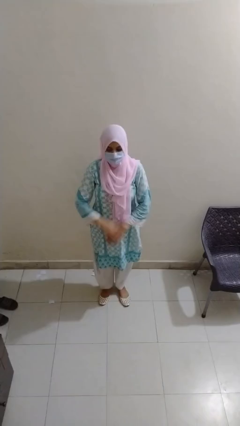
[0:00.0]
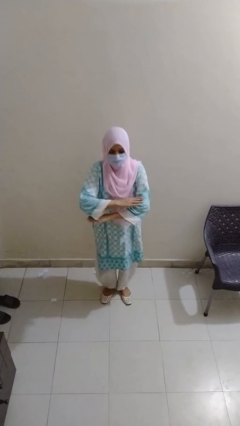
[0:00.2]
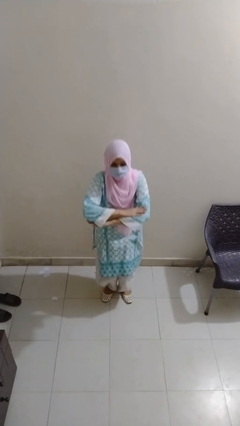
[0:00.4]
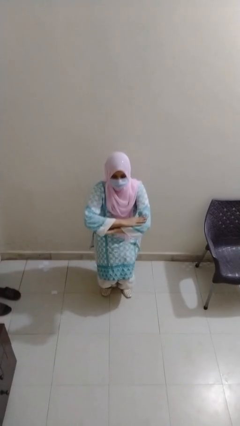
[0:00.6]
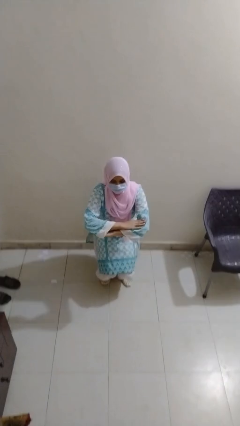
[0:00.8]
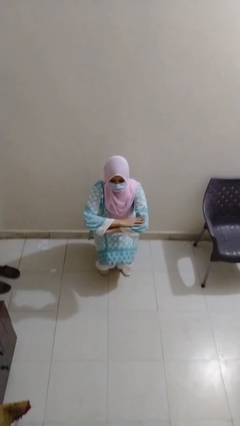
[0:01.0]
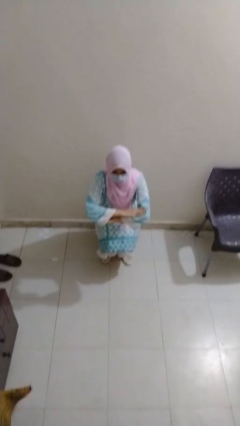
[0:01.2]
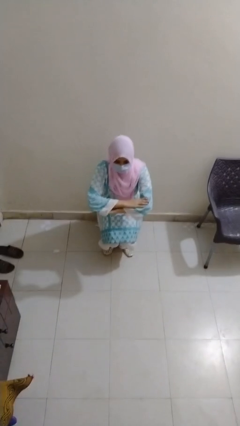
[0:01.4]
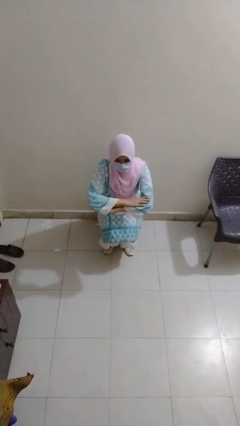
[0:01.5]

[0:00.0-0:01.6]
person squats

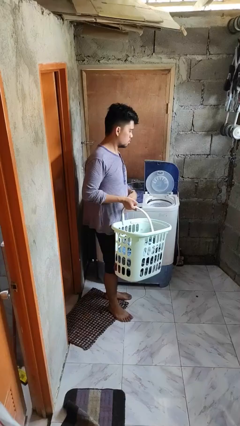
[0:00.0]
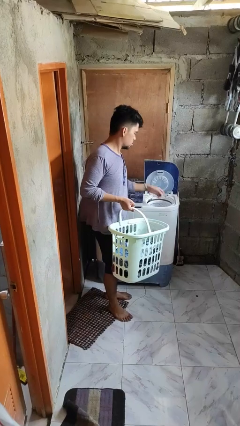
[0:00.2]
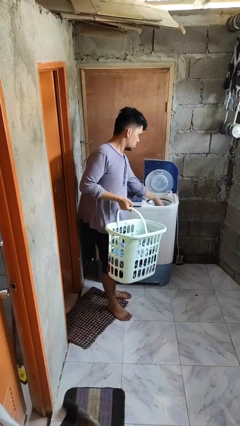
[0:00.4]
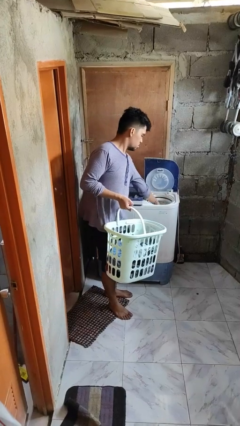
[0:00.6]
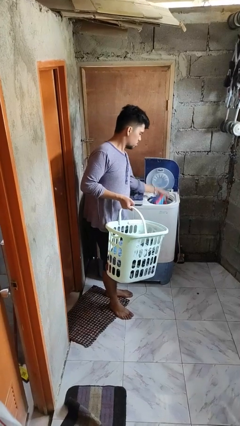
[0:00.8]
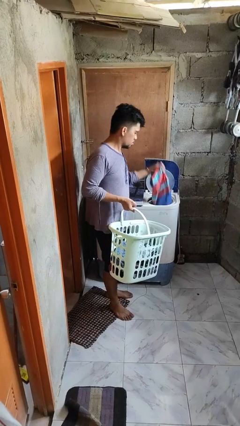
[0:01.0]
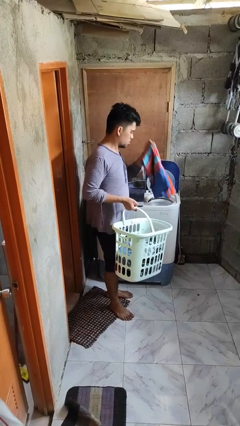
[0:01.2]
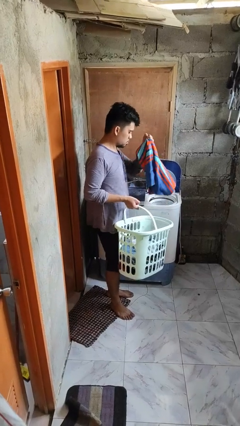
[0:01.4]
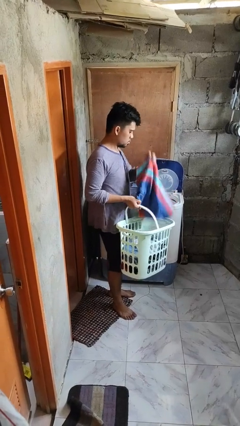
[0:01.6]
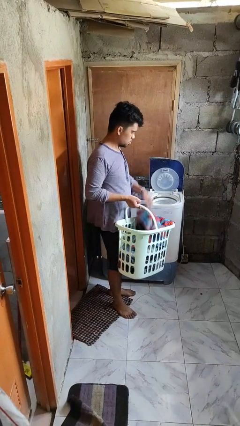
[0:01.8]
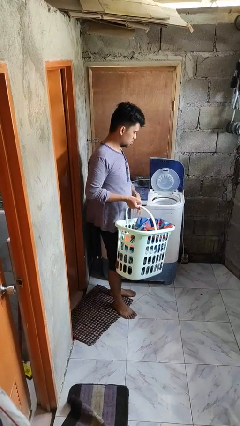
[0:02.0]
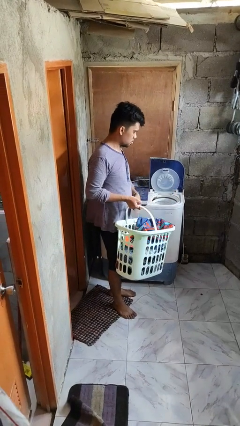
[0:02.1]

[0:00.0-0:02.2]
person unloads dryer

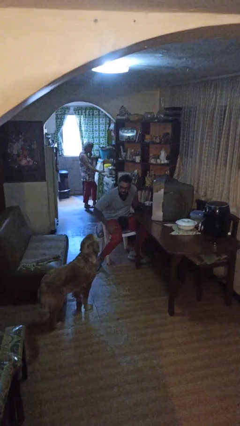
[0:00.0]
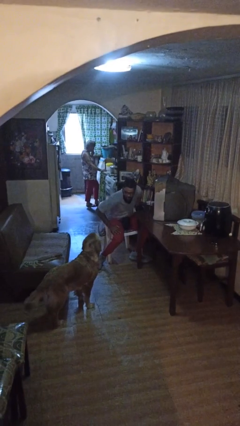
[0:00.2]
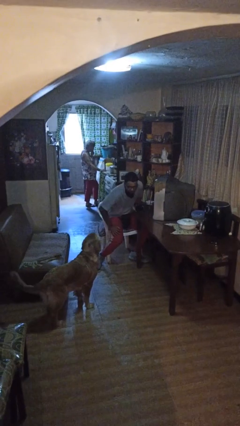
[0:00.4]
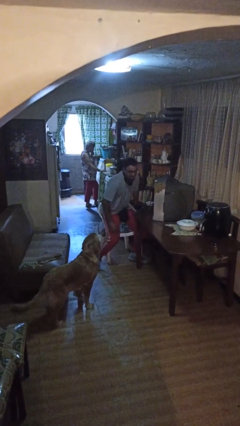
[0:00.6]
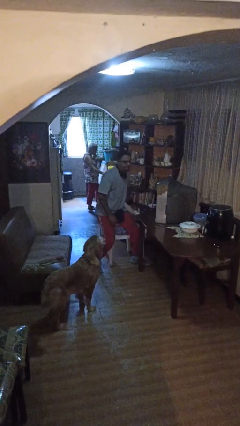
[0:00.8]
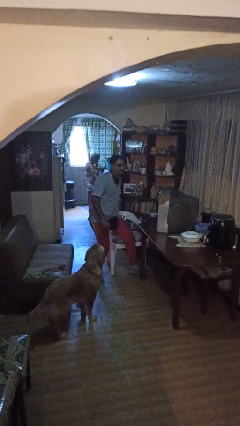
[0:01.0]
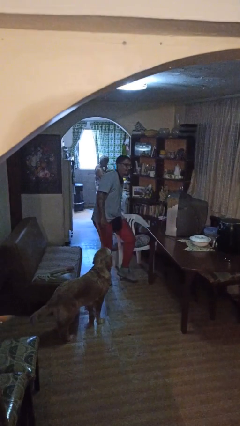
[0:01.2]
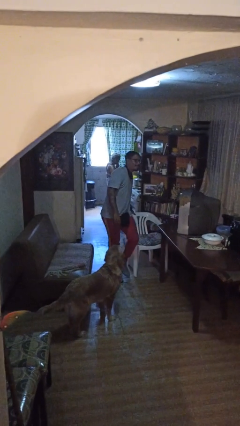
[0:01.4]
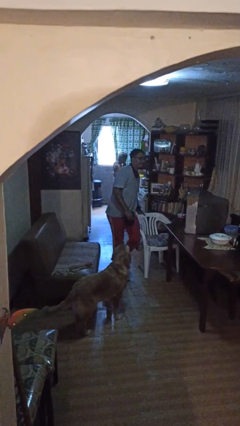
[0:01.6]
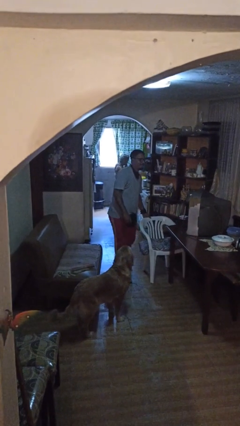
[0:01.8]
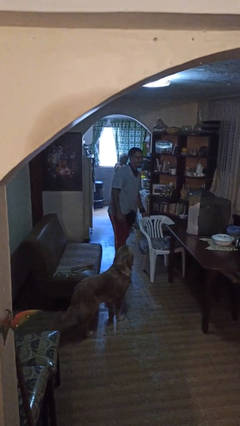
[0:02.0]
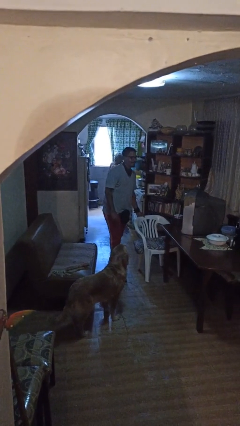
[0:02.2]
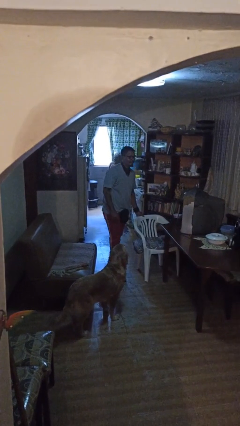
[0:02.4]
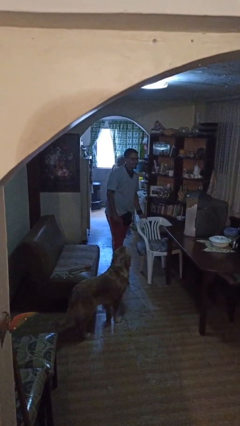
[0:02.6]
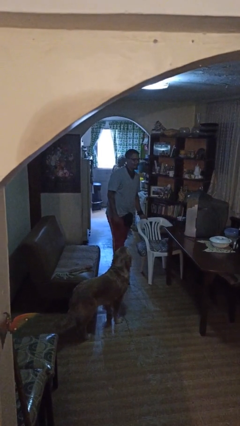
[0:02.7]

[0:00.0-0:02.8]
person stands up

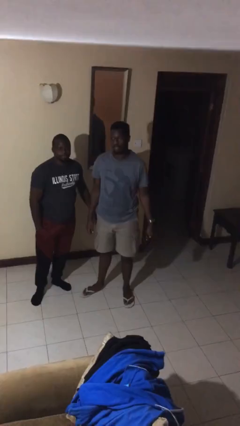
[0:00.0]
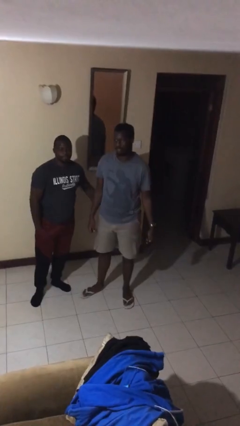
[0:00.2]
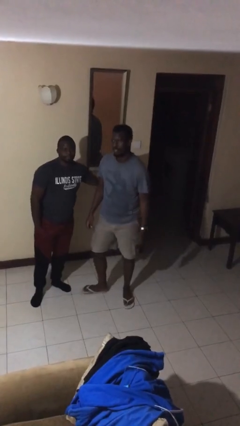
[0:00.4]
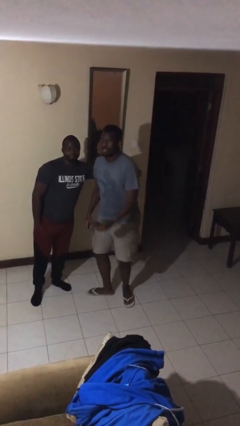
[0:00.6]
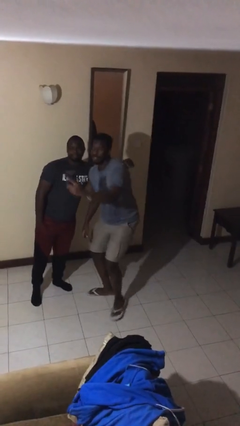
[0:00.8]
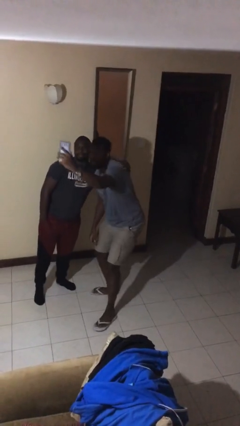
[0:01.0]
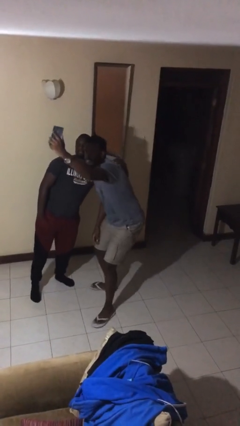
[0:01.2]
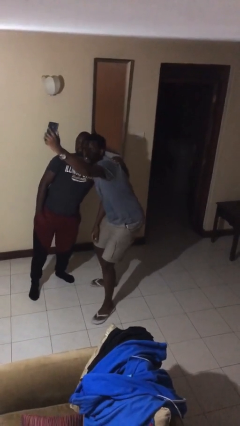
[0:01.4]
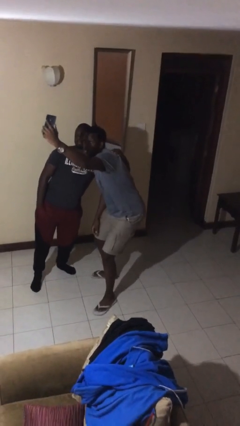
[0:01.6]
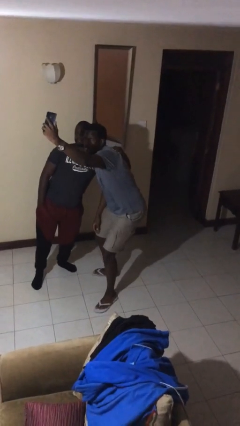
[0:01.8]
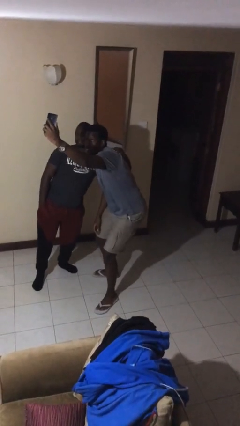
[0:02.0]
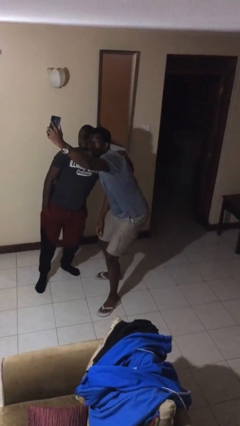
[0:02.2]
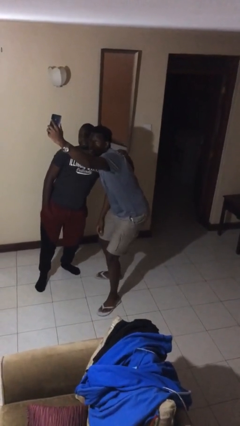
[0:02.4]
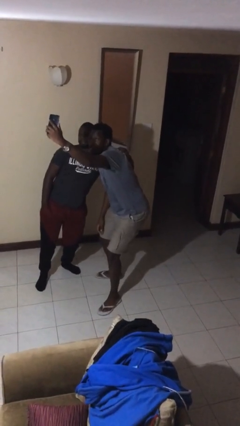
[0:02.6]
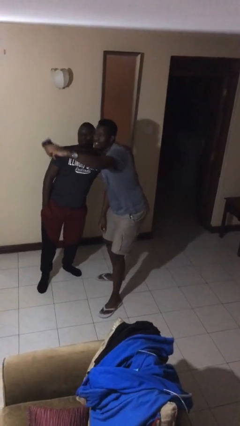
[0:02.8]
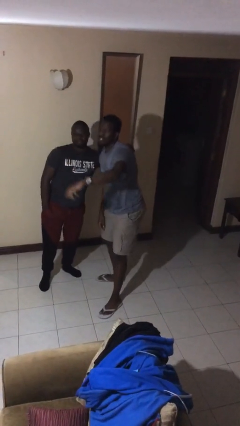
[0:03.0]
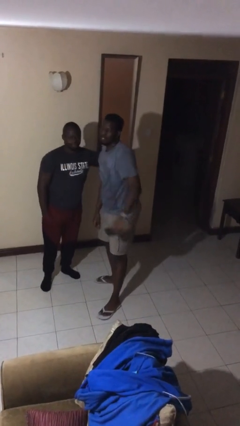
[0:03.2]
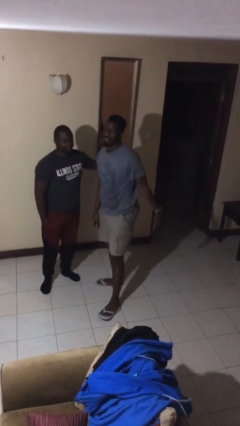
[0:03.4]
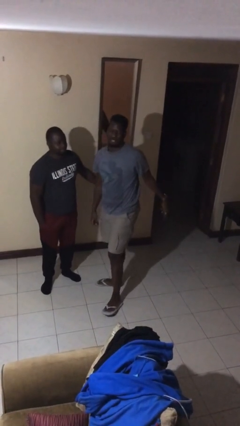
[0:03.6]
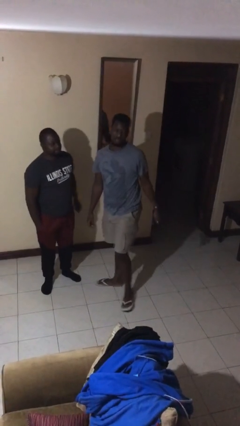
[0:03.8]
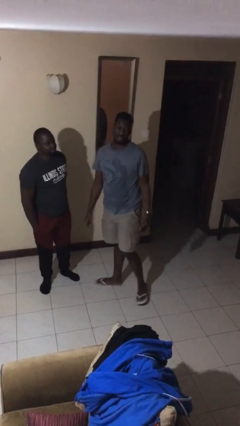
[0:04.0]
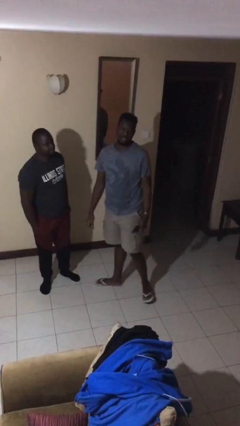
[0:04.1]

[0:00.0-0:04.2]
person takes selfie with person

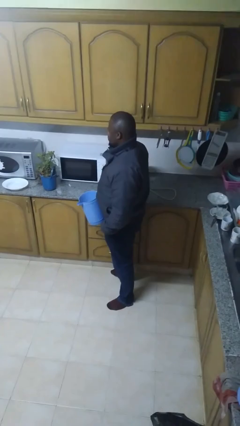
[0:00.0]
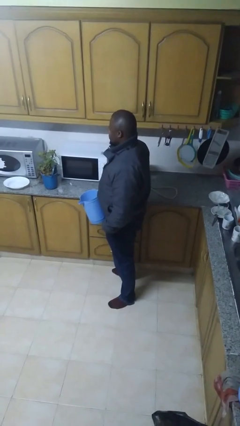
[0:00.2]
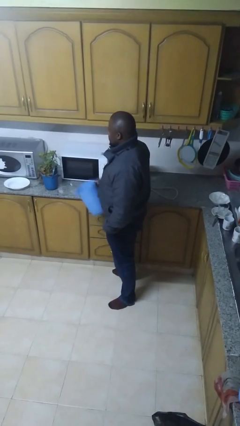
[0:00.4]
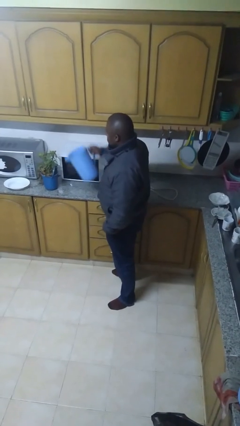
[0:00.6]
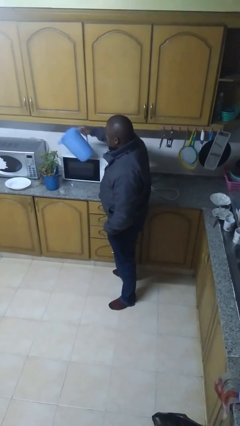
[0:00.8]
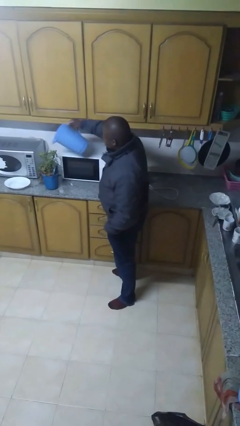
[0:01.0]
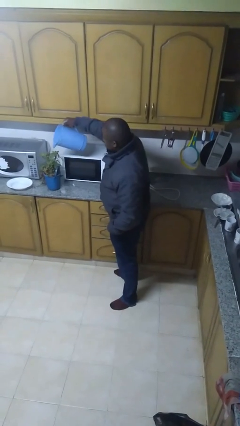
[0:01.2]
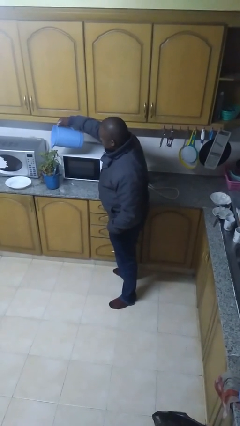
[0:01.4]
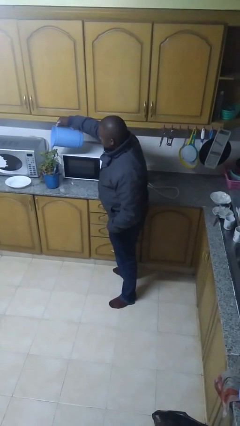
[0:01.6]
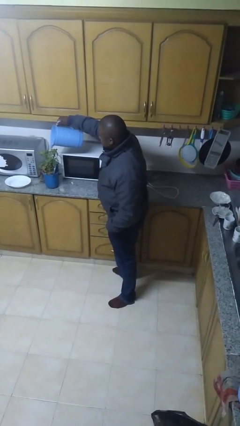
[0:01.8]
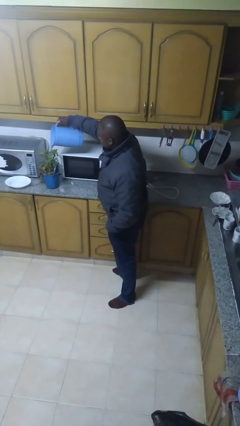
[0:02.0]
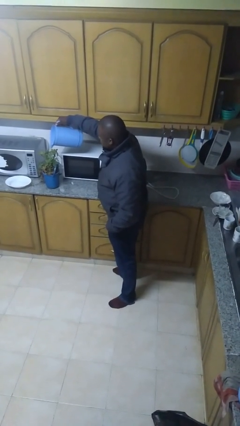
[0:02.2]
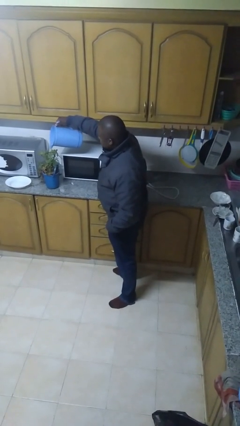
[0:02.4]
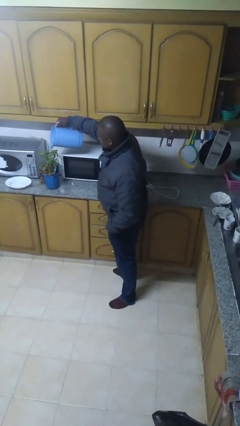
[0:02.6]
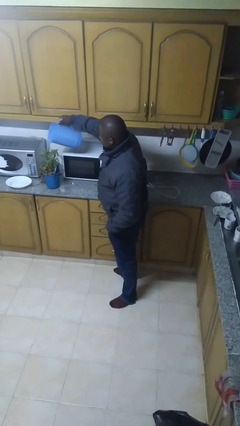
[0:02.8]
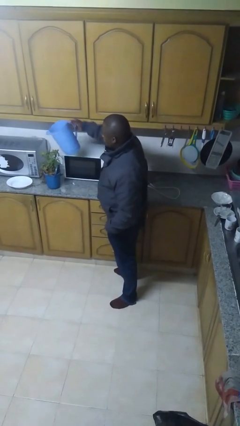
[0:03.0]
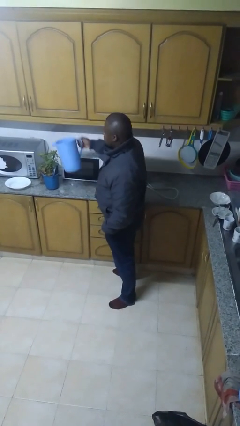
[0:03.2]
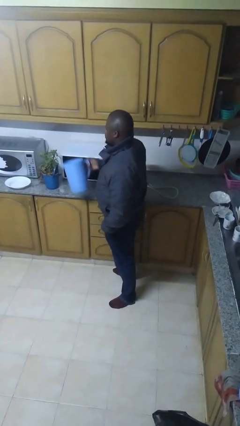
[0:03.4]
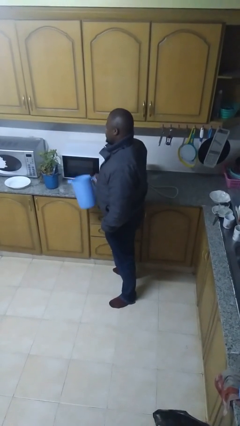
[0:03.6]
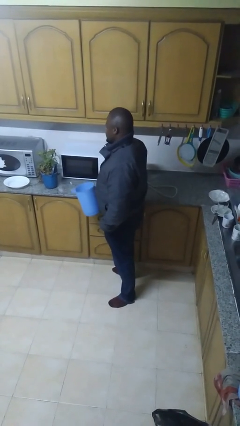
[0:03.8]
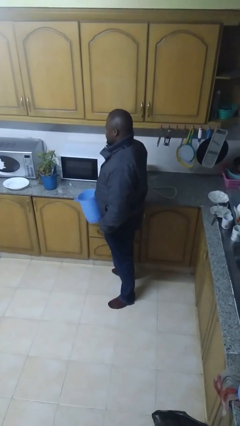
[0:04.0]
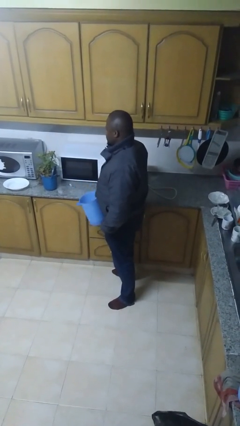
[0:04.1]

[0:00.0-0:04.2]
person waters houseplant

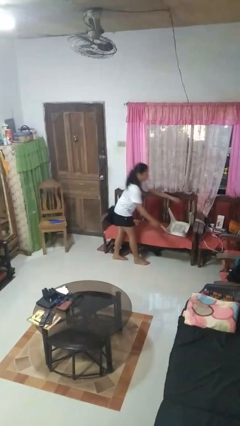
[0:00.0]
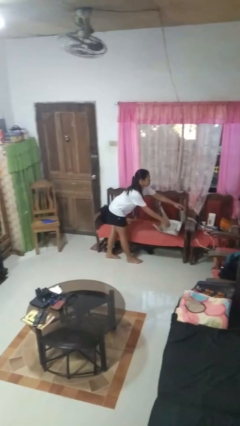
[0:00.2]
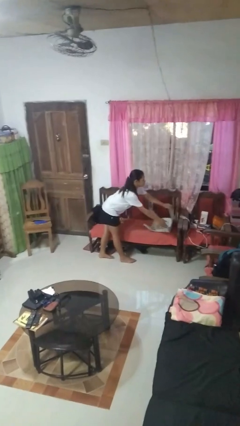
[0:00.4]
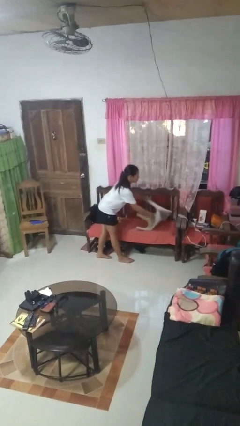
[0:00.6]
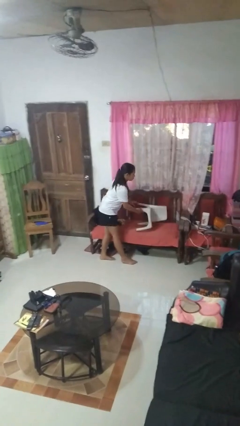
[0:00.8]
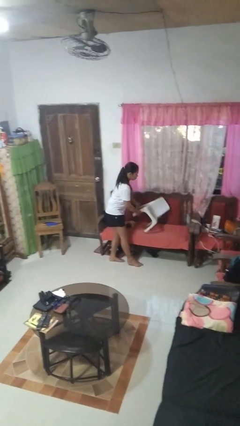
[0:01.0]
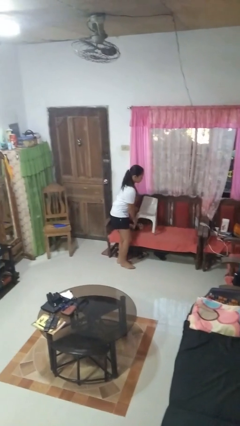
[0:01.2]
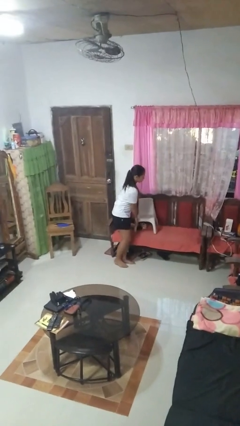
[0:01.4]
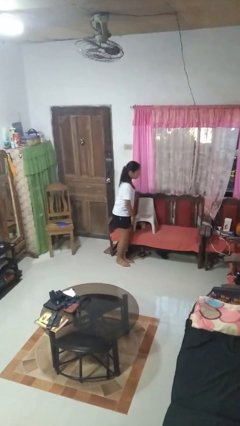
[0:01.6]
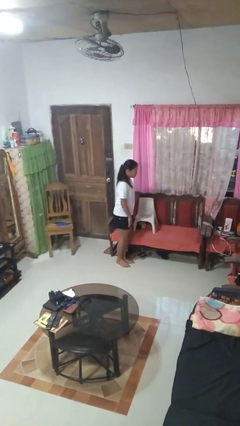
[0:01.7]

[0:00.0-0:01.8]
person sets upright furniture

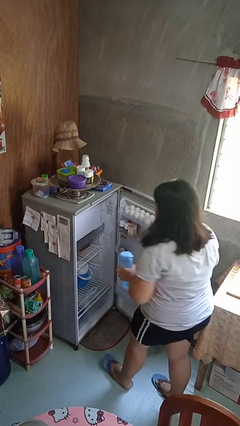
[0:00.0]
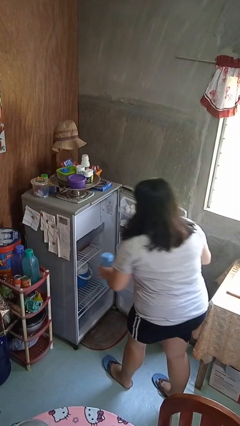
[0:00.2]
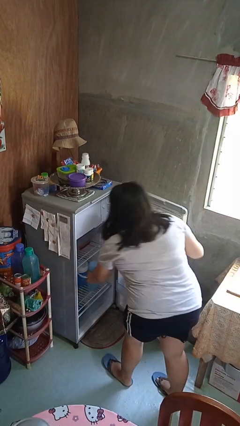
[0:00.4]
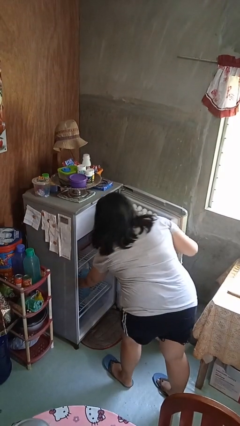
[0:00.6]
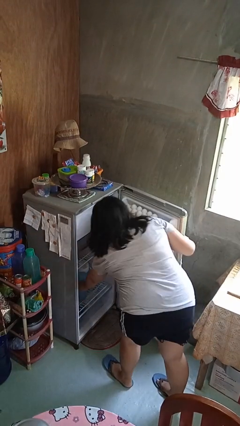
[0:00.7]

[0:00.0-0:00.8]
person puts object into refrigerator
